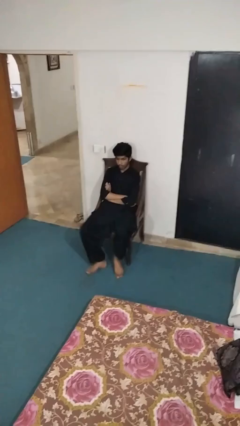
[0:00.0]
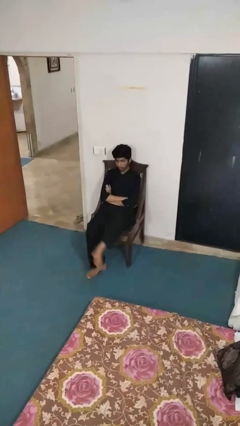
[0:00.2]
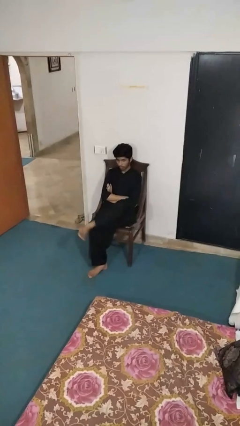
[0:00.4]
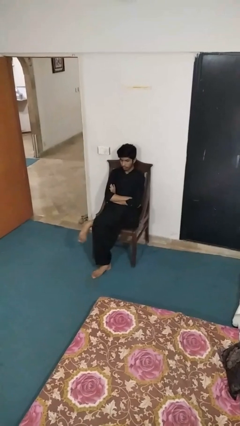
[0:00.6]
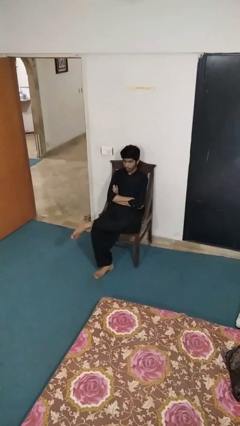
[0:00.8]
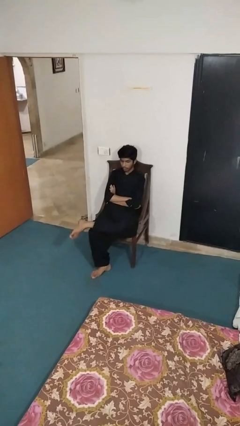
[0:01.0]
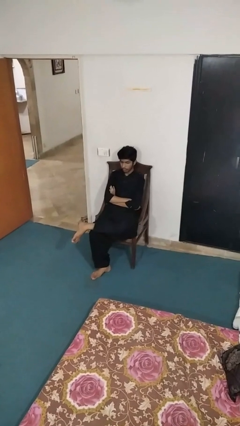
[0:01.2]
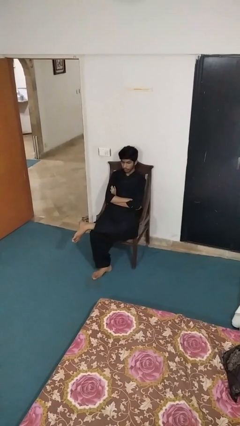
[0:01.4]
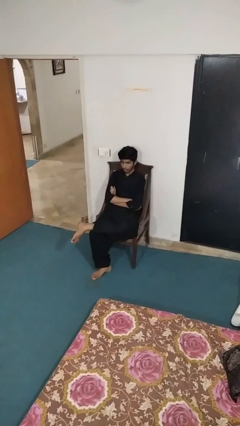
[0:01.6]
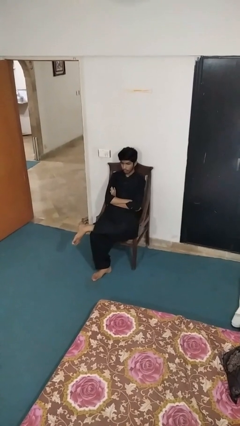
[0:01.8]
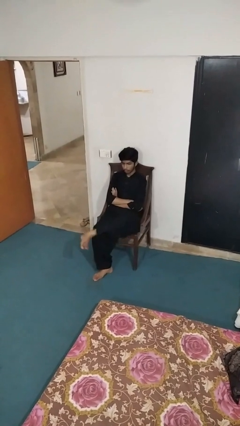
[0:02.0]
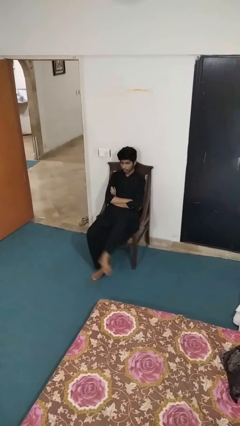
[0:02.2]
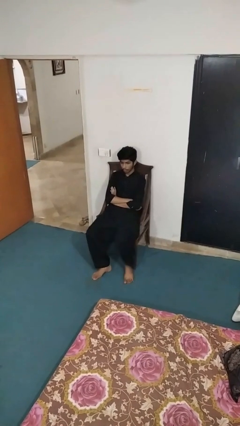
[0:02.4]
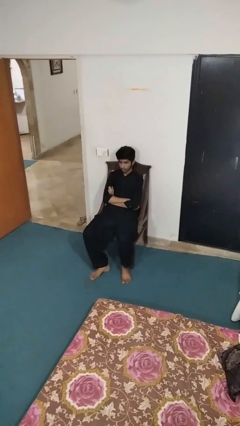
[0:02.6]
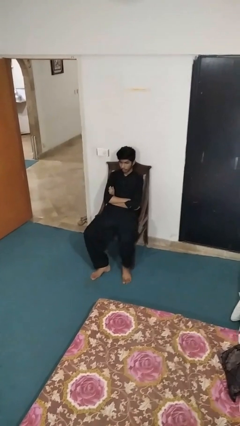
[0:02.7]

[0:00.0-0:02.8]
person crosses legs

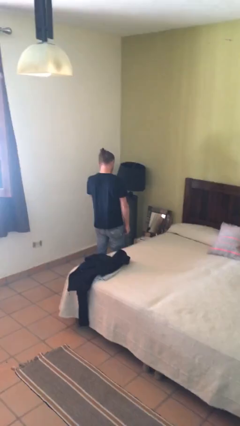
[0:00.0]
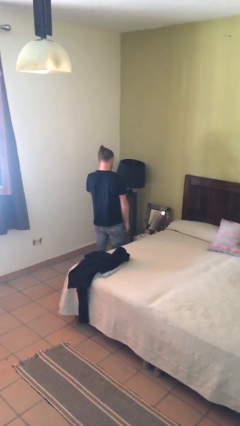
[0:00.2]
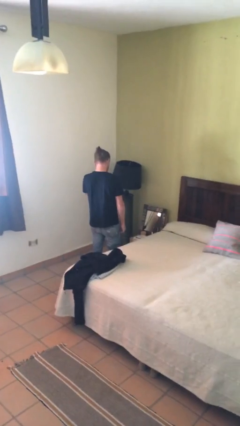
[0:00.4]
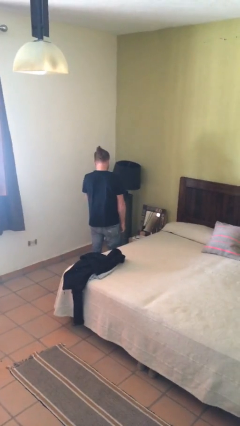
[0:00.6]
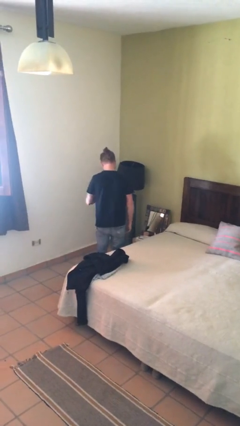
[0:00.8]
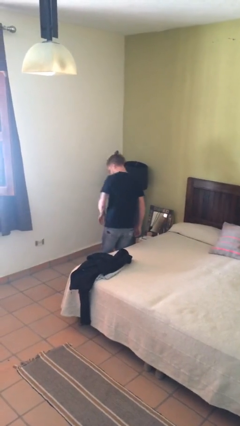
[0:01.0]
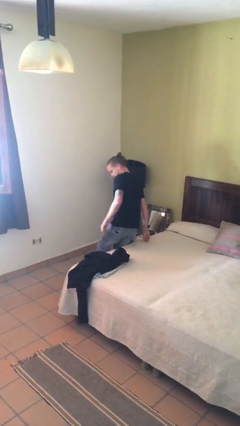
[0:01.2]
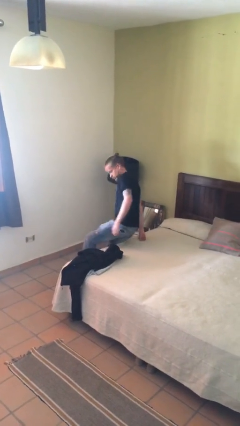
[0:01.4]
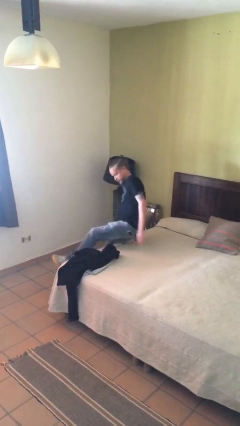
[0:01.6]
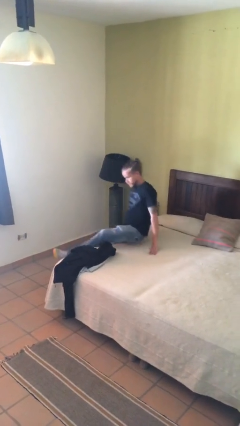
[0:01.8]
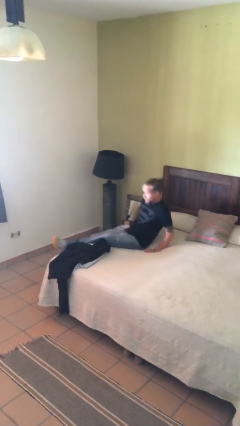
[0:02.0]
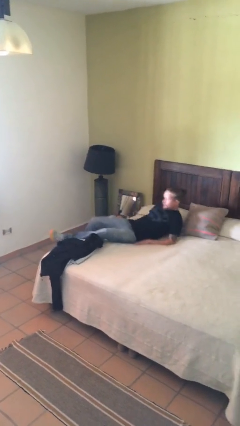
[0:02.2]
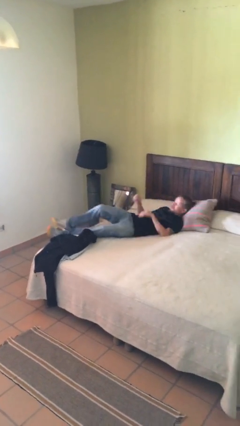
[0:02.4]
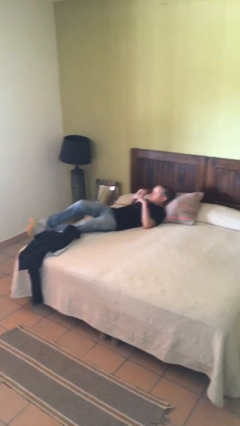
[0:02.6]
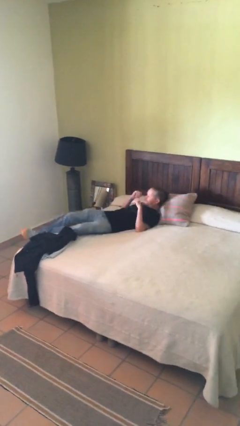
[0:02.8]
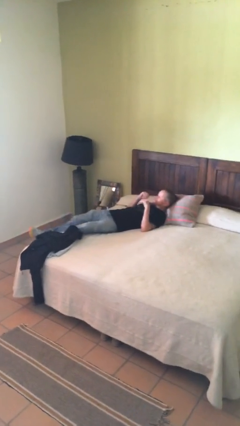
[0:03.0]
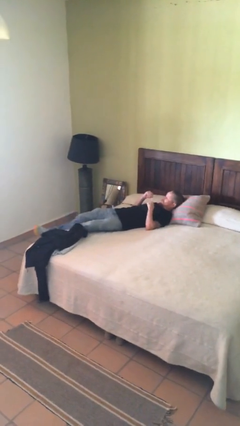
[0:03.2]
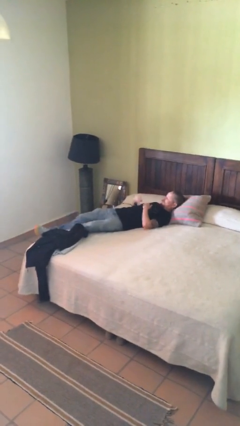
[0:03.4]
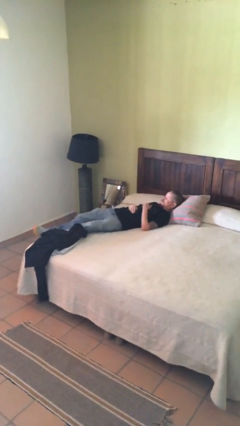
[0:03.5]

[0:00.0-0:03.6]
person lies down on bed

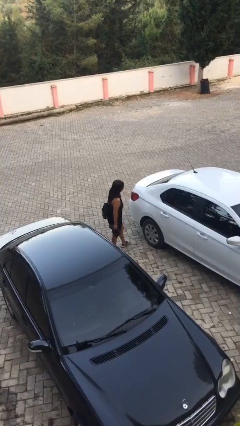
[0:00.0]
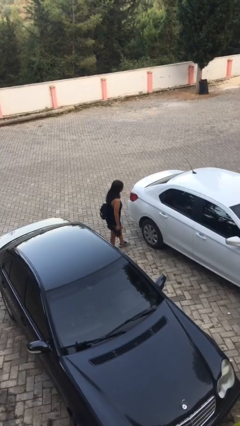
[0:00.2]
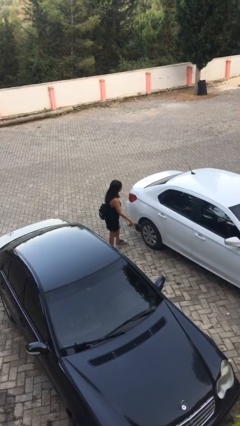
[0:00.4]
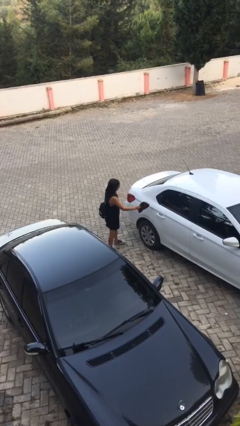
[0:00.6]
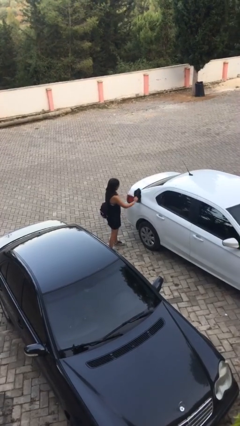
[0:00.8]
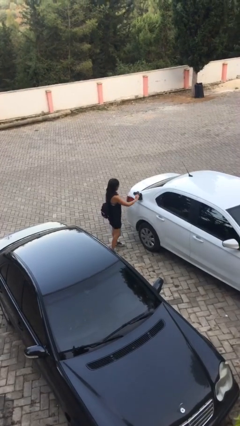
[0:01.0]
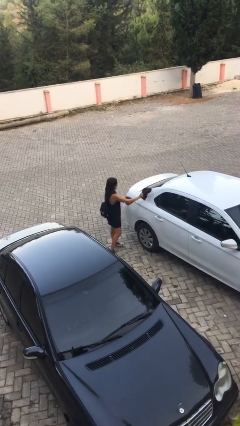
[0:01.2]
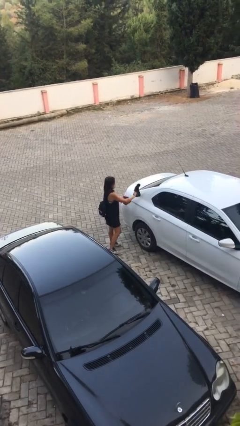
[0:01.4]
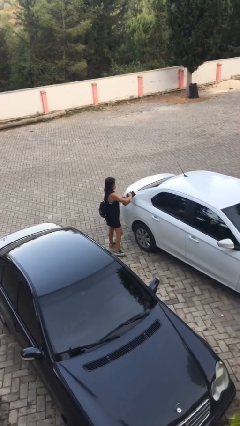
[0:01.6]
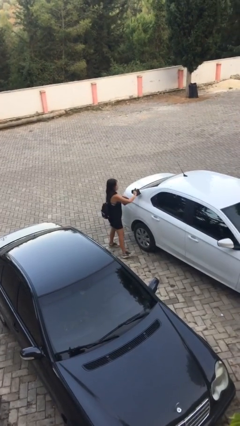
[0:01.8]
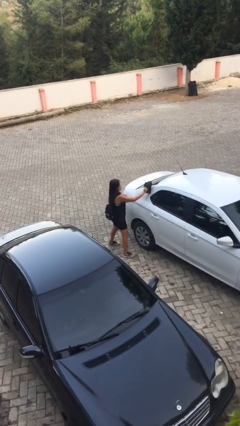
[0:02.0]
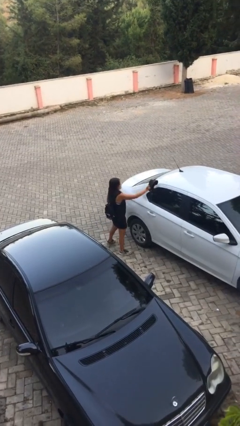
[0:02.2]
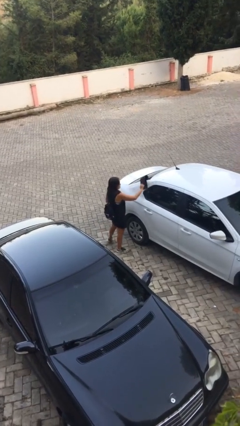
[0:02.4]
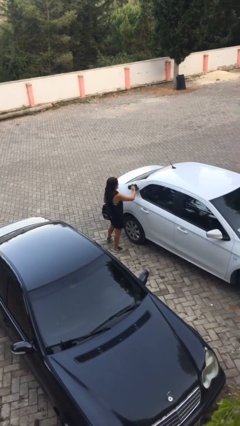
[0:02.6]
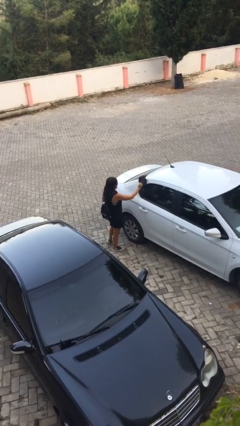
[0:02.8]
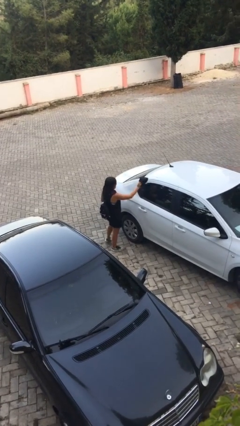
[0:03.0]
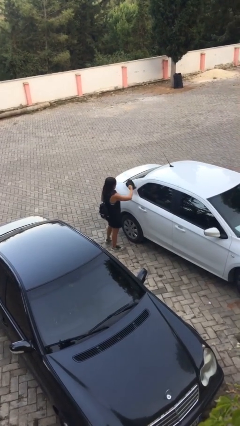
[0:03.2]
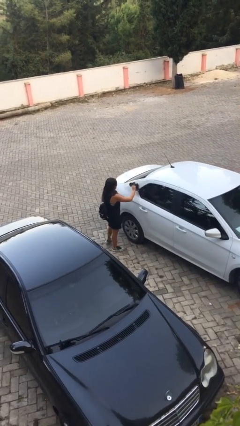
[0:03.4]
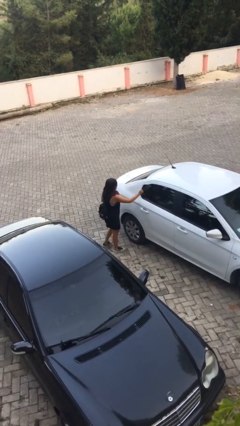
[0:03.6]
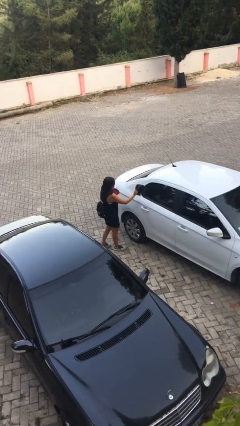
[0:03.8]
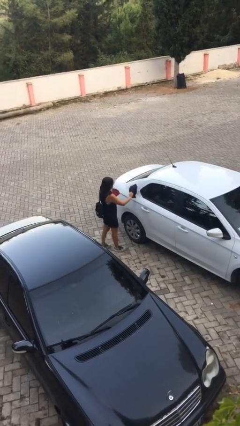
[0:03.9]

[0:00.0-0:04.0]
person polishes car with rag

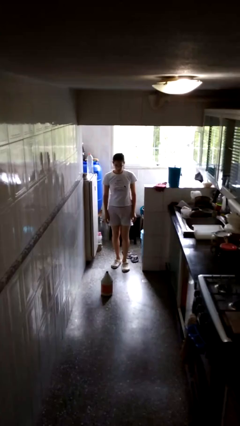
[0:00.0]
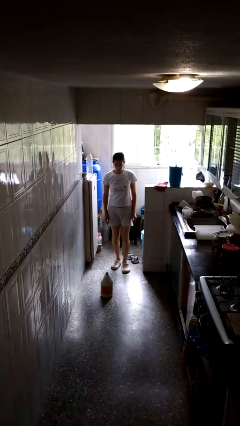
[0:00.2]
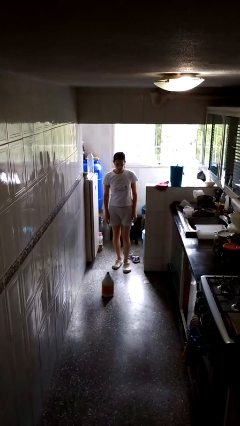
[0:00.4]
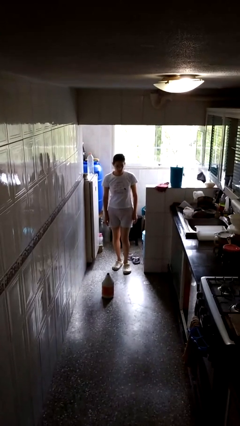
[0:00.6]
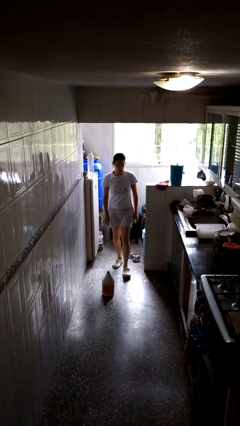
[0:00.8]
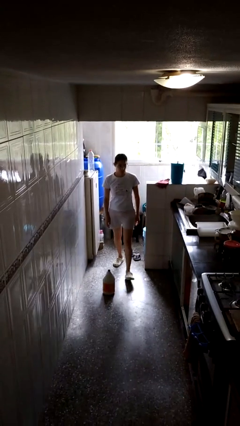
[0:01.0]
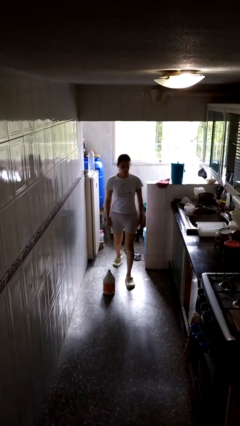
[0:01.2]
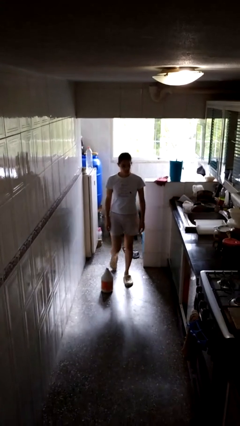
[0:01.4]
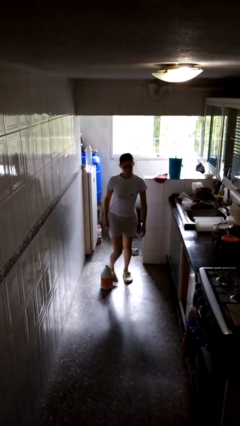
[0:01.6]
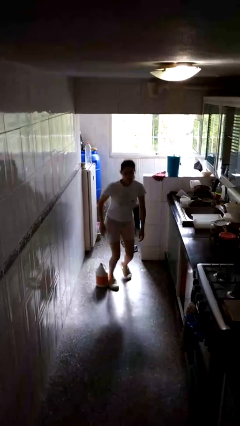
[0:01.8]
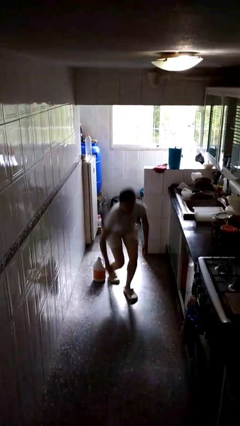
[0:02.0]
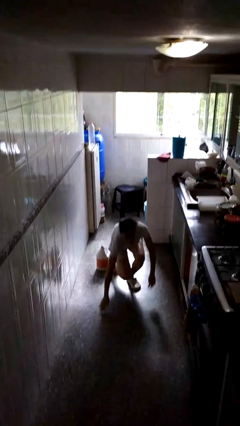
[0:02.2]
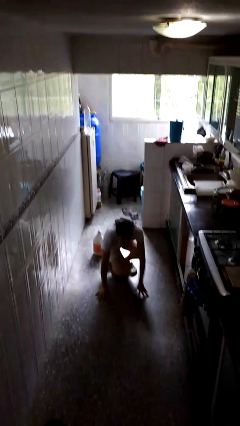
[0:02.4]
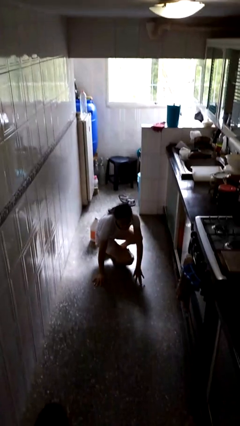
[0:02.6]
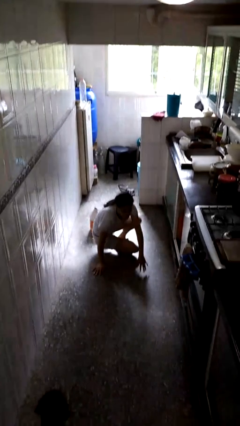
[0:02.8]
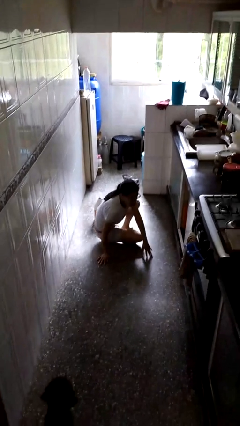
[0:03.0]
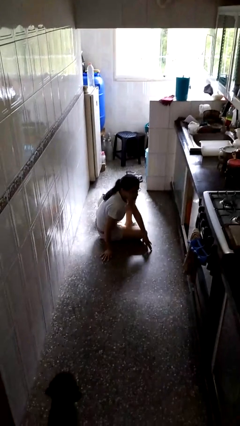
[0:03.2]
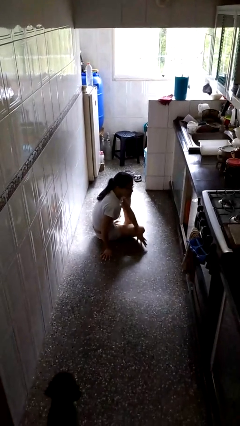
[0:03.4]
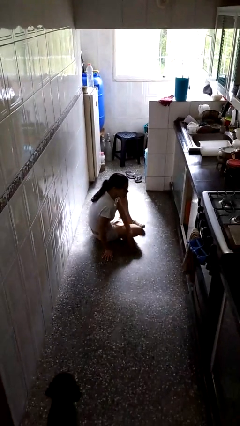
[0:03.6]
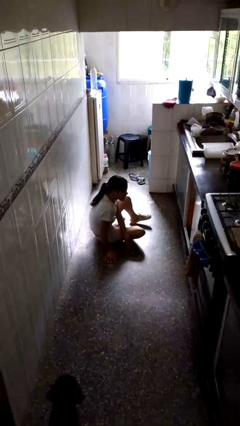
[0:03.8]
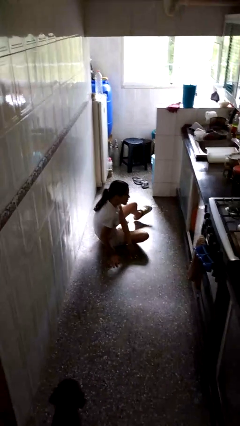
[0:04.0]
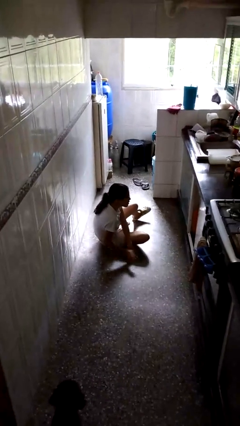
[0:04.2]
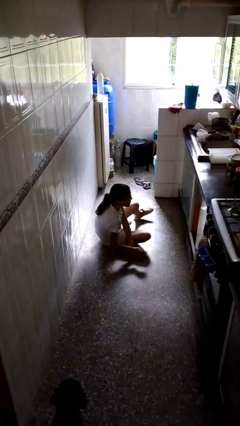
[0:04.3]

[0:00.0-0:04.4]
person trips on object on floor

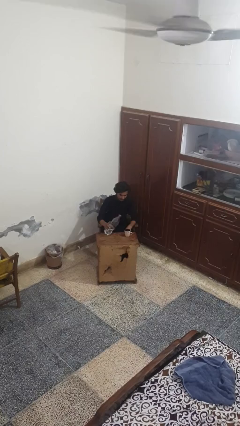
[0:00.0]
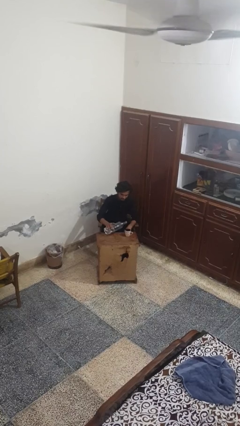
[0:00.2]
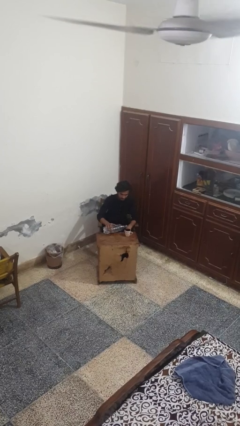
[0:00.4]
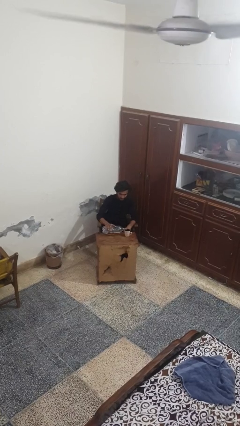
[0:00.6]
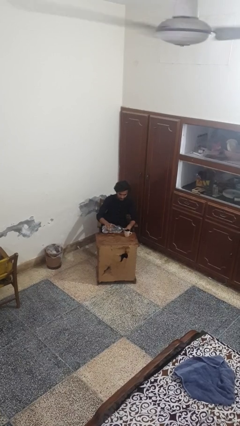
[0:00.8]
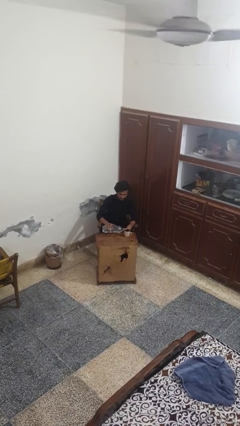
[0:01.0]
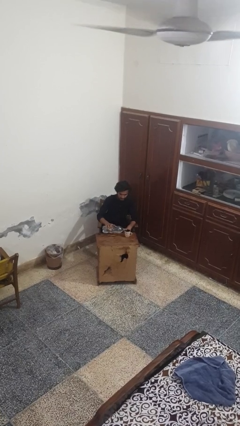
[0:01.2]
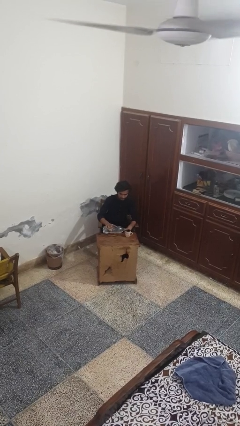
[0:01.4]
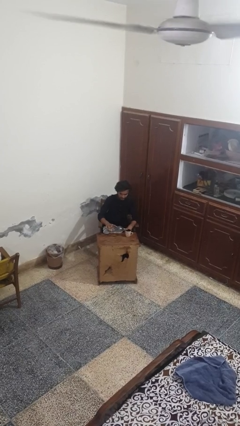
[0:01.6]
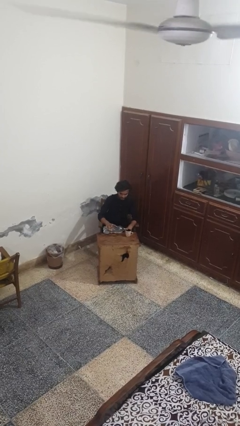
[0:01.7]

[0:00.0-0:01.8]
person pours liquid into cup

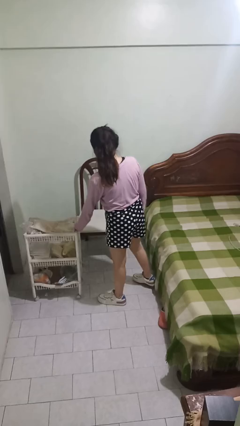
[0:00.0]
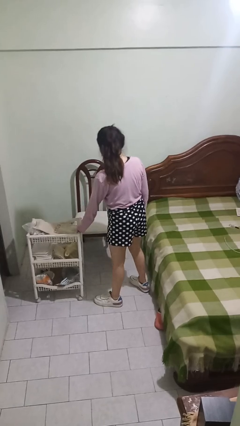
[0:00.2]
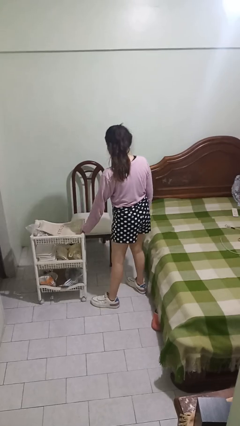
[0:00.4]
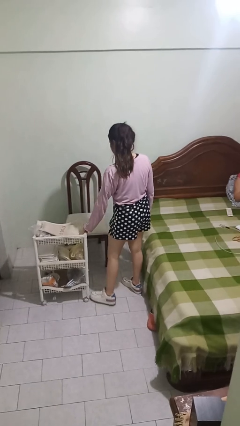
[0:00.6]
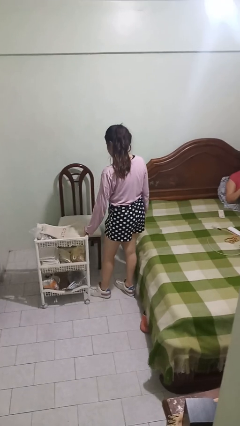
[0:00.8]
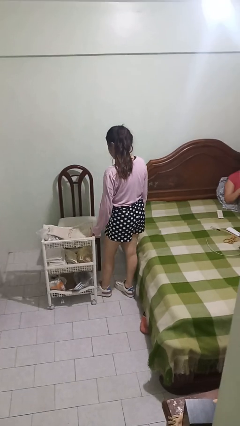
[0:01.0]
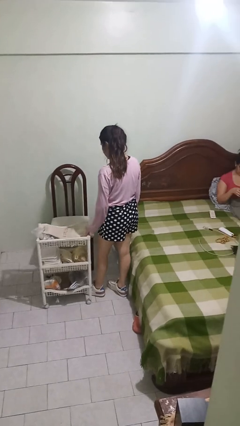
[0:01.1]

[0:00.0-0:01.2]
person pulls wheeled cart
